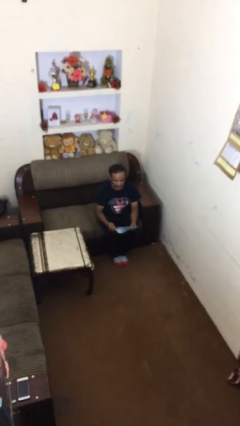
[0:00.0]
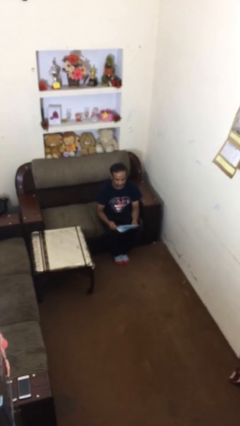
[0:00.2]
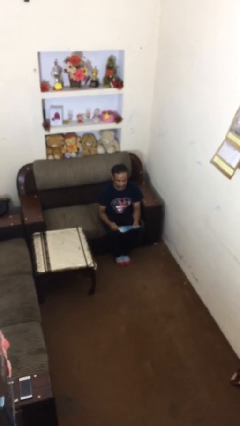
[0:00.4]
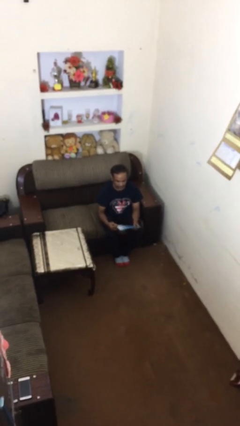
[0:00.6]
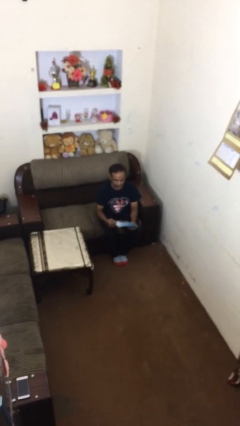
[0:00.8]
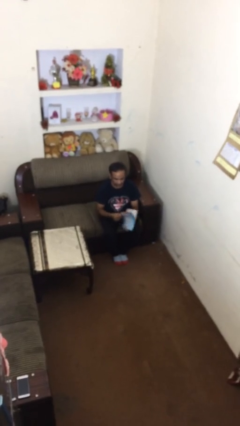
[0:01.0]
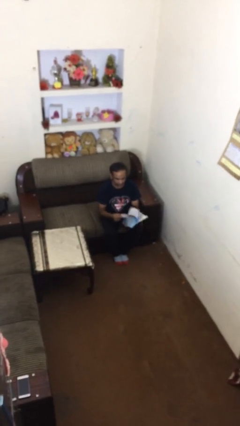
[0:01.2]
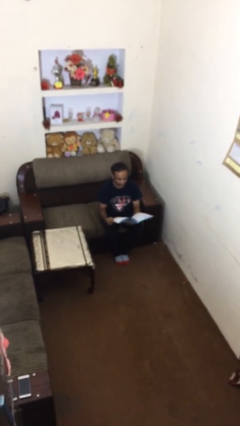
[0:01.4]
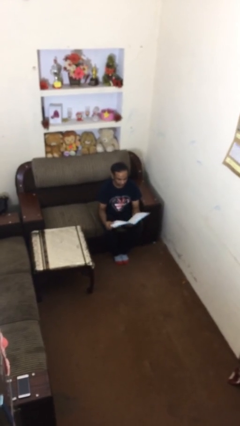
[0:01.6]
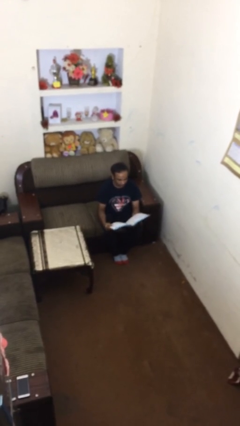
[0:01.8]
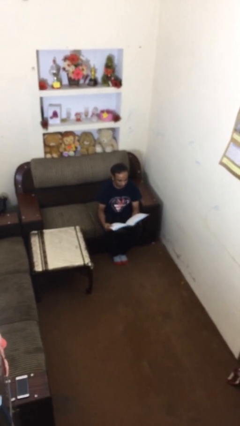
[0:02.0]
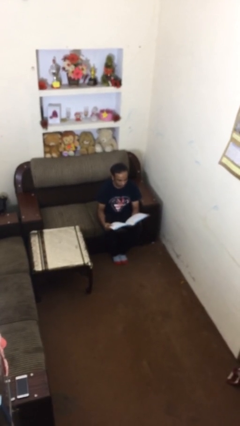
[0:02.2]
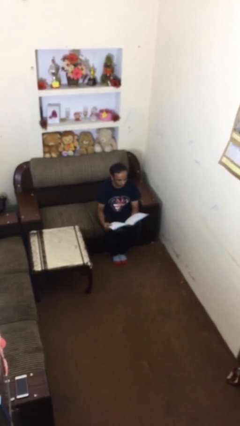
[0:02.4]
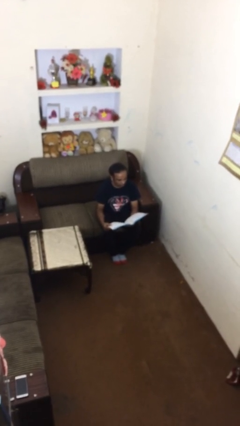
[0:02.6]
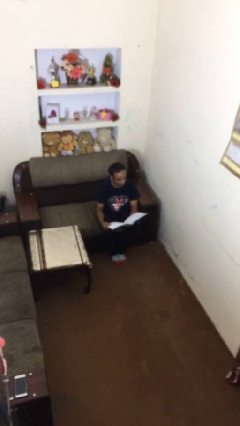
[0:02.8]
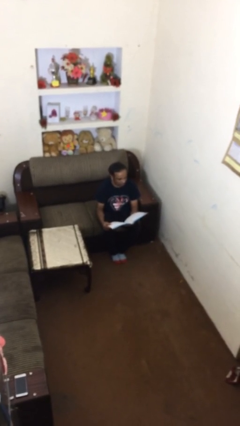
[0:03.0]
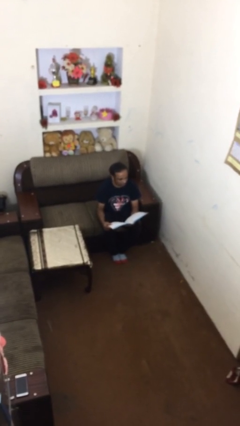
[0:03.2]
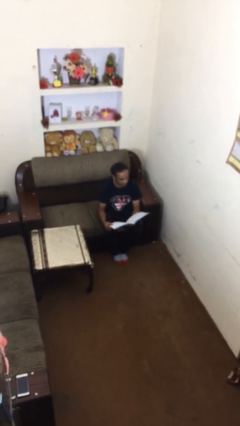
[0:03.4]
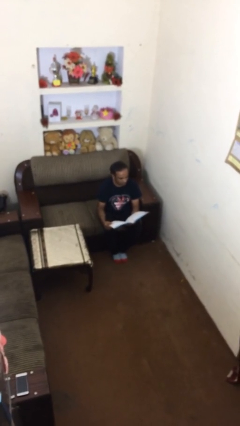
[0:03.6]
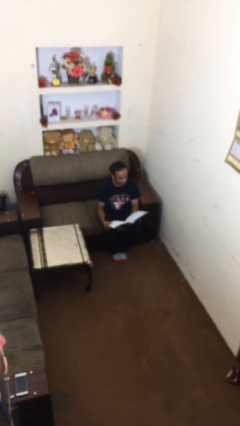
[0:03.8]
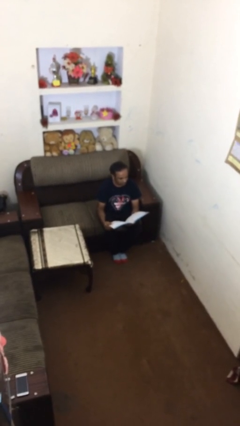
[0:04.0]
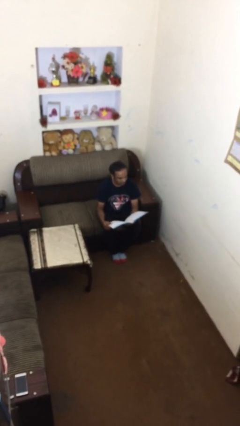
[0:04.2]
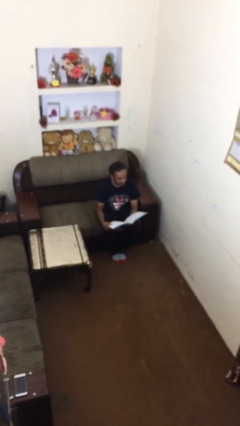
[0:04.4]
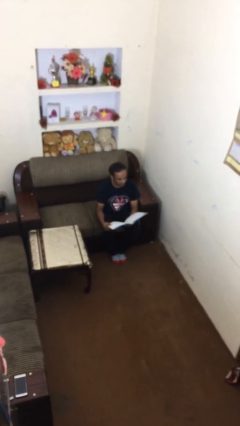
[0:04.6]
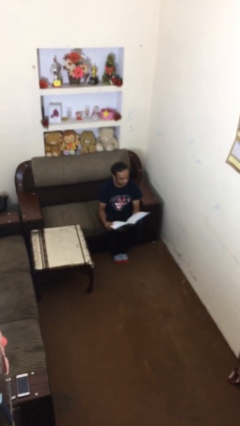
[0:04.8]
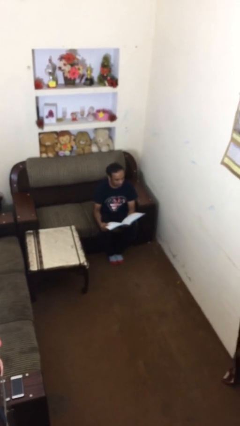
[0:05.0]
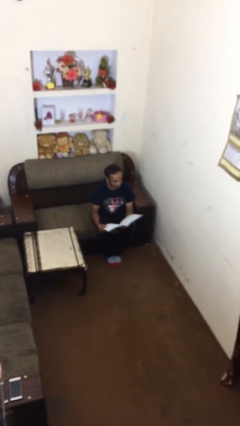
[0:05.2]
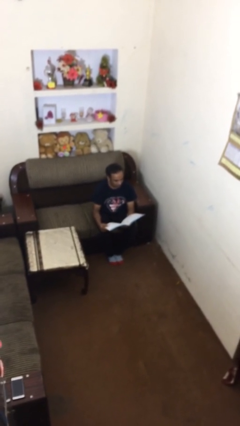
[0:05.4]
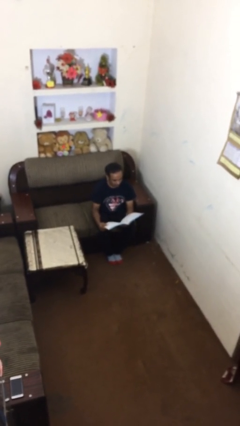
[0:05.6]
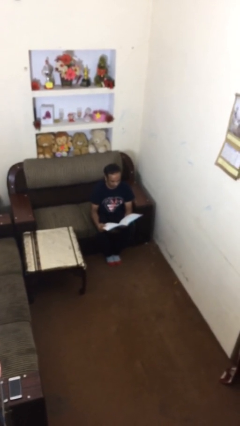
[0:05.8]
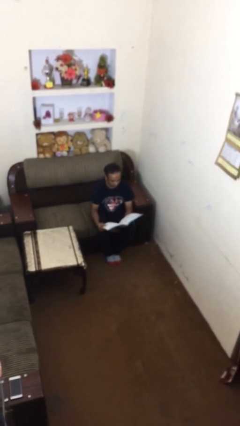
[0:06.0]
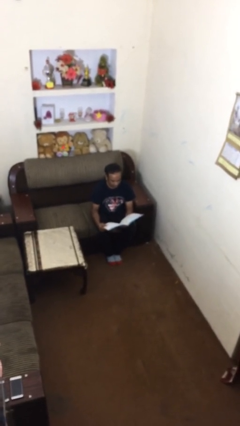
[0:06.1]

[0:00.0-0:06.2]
person reads document

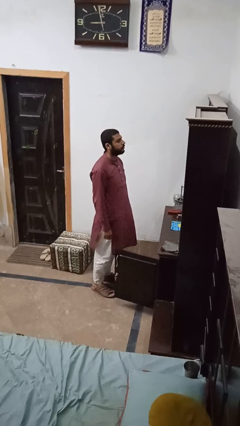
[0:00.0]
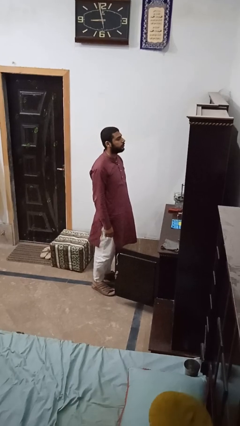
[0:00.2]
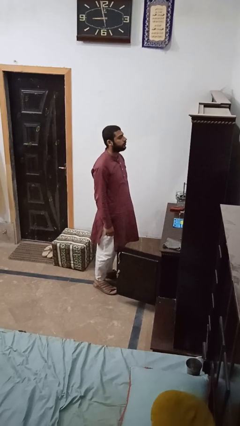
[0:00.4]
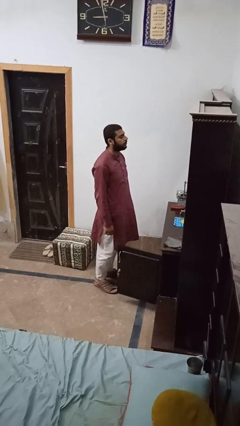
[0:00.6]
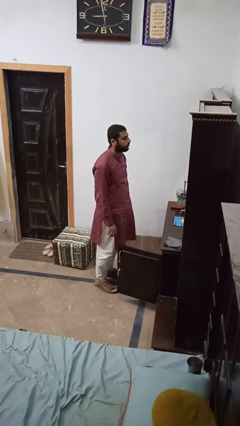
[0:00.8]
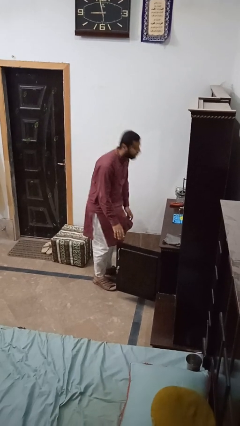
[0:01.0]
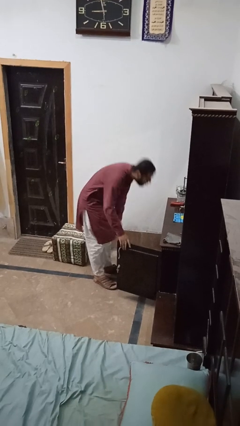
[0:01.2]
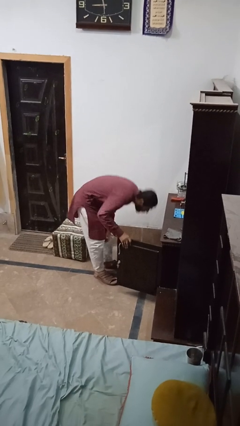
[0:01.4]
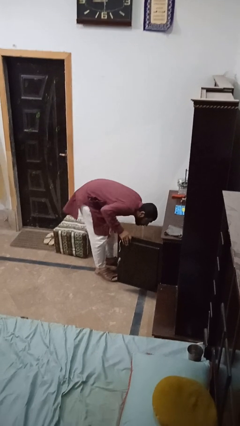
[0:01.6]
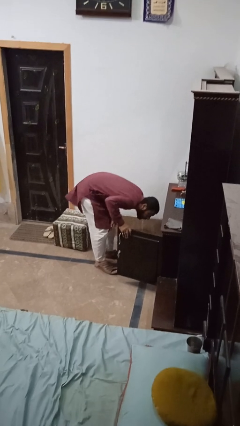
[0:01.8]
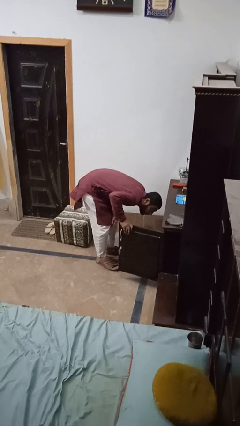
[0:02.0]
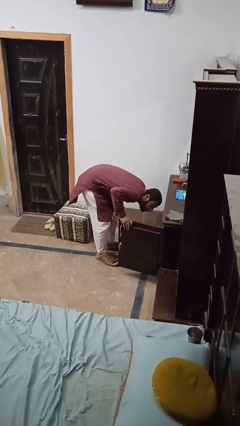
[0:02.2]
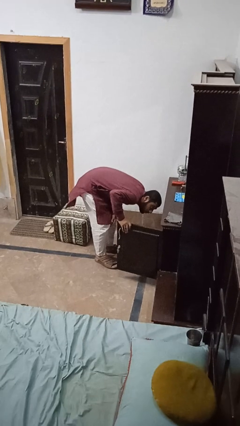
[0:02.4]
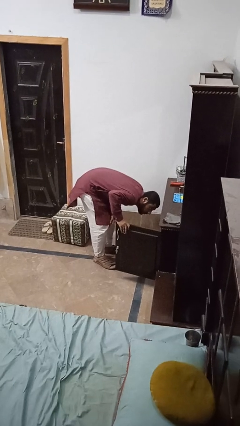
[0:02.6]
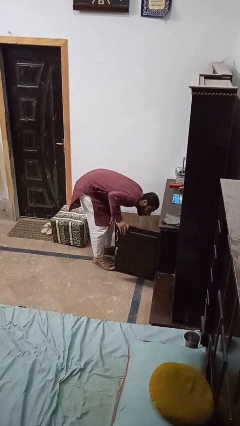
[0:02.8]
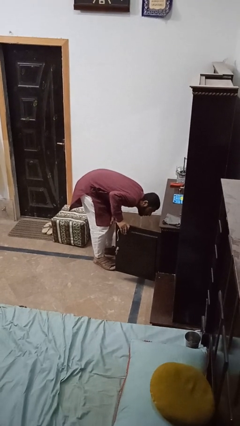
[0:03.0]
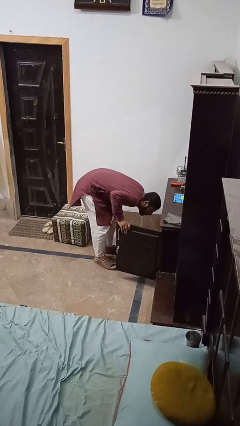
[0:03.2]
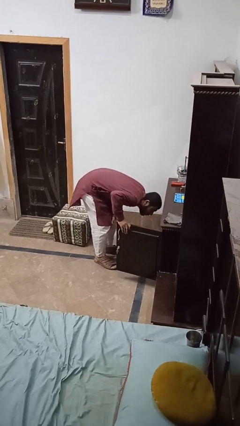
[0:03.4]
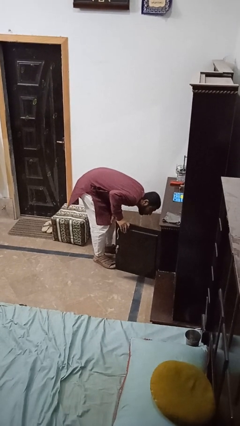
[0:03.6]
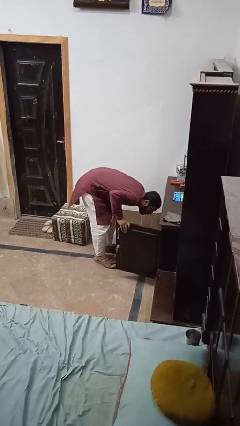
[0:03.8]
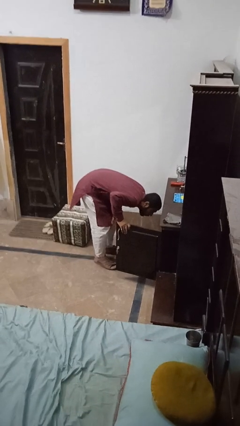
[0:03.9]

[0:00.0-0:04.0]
person searches in cabinet

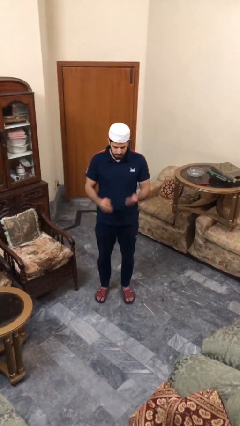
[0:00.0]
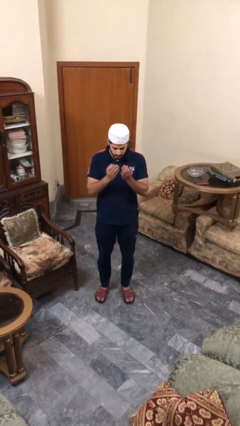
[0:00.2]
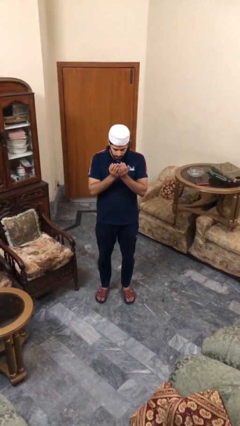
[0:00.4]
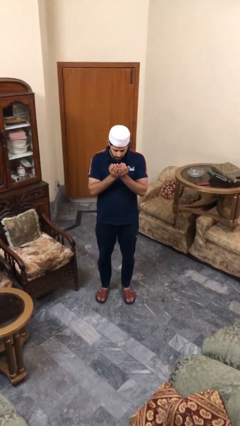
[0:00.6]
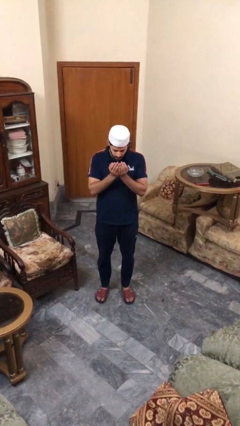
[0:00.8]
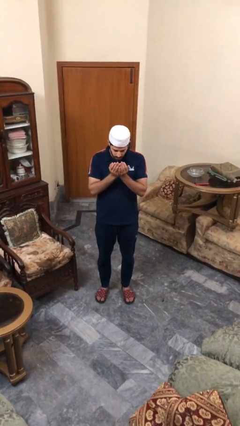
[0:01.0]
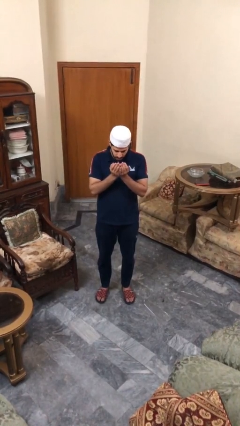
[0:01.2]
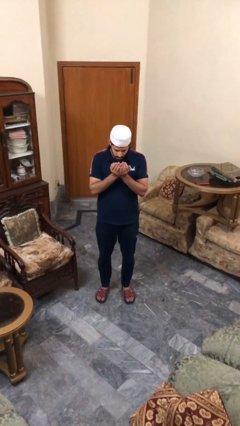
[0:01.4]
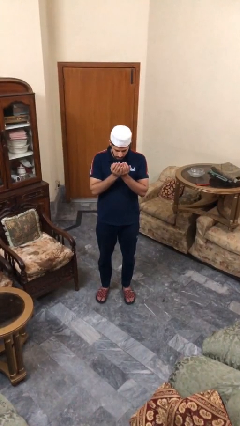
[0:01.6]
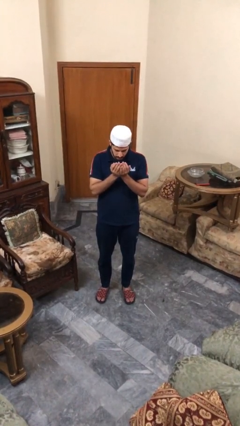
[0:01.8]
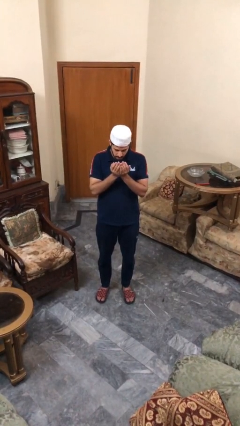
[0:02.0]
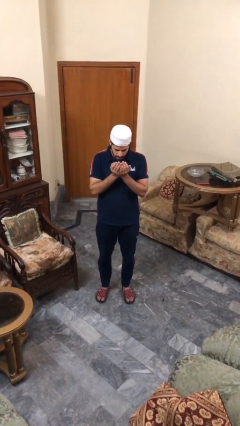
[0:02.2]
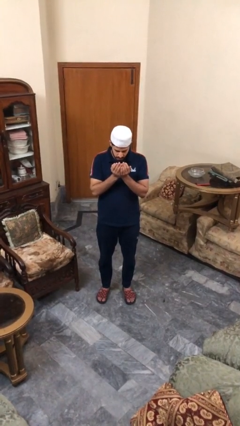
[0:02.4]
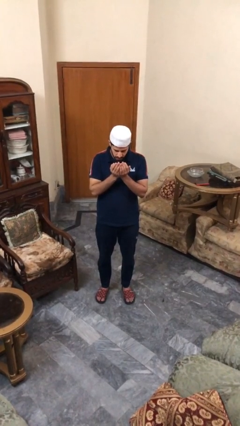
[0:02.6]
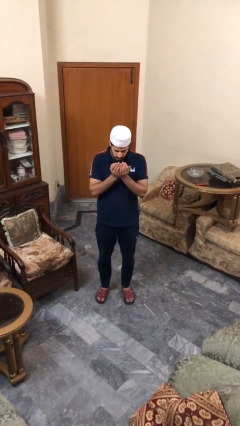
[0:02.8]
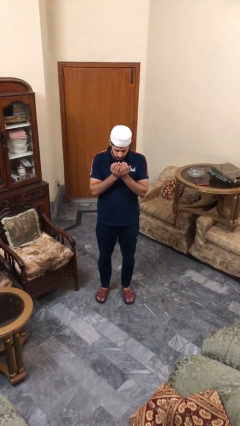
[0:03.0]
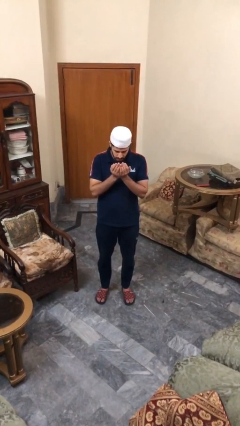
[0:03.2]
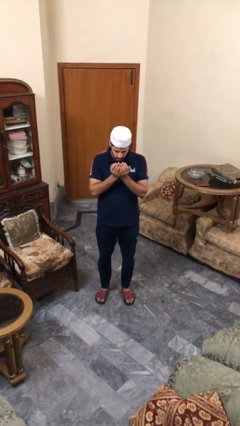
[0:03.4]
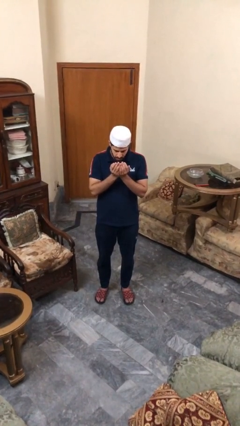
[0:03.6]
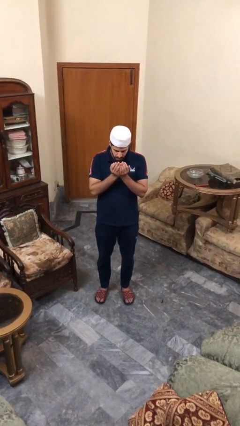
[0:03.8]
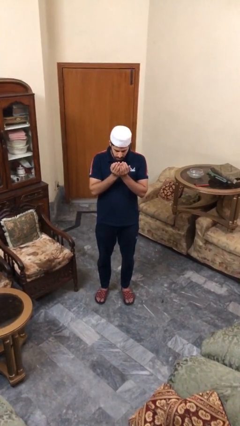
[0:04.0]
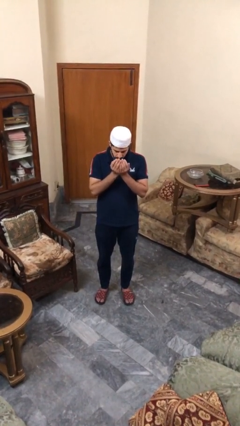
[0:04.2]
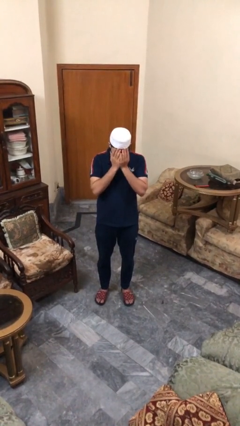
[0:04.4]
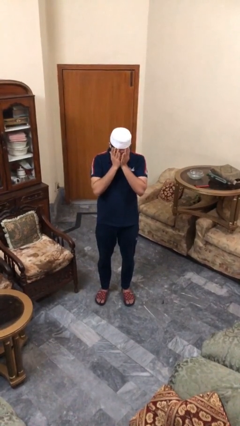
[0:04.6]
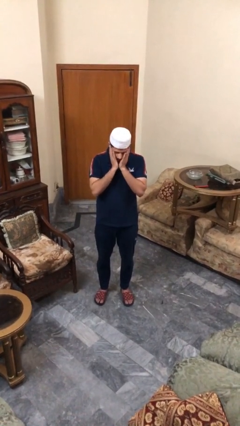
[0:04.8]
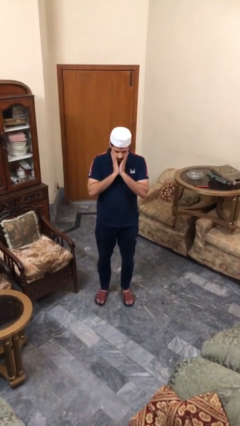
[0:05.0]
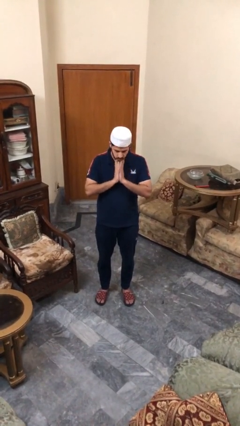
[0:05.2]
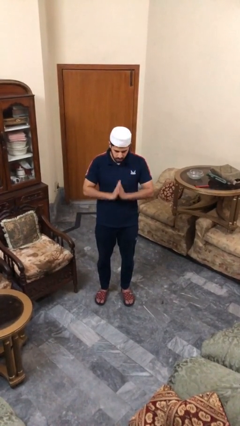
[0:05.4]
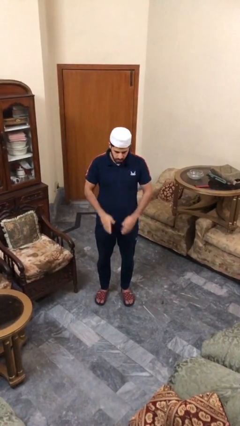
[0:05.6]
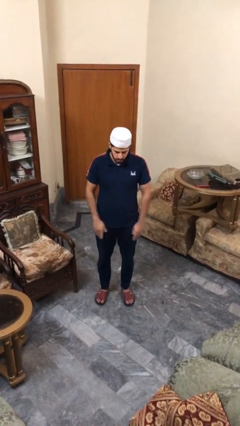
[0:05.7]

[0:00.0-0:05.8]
person prays

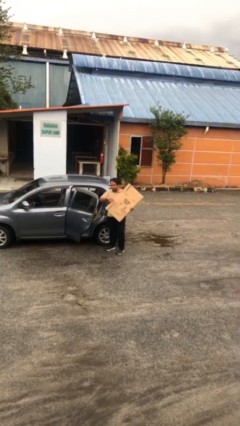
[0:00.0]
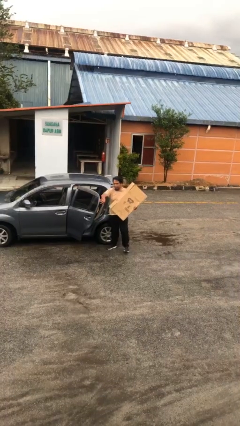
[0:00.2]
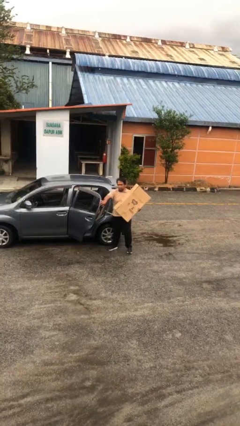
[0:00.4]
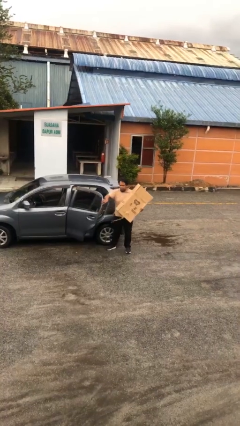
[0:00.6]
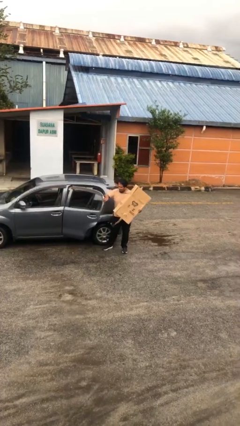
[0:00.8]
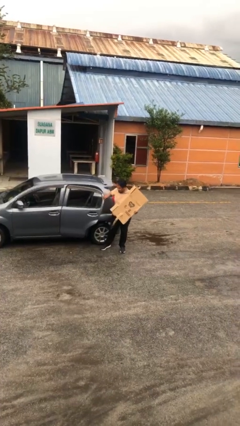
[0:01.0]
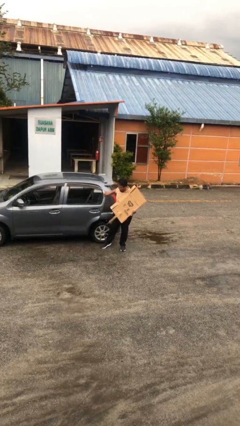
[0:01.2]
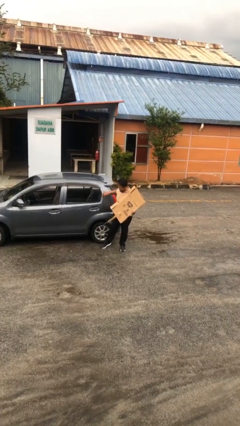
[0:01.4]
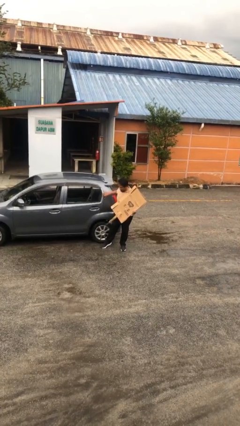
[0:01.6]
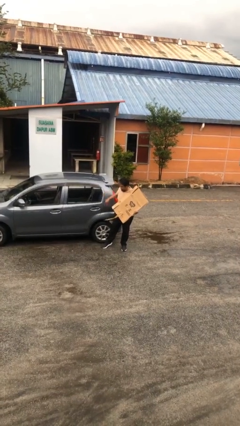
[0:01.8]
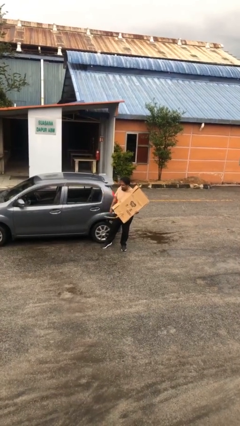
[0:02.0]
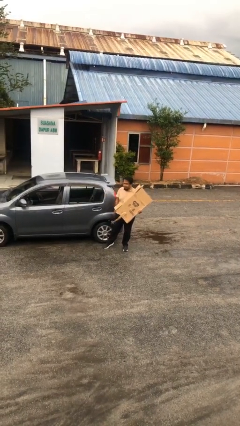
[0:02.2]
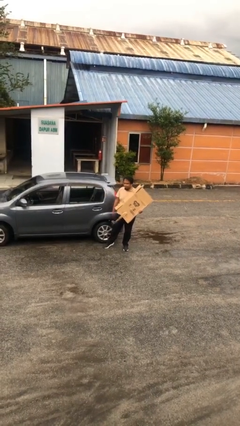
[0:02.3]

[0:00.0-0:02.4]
person closes car door
